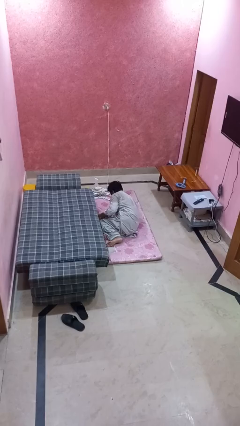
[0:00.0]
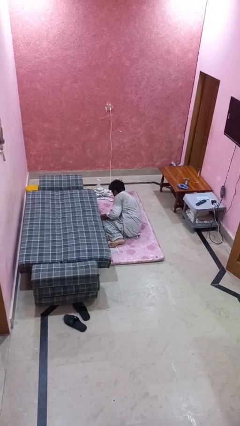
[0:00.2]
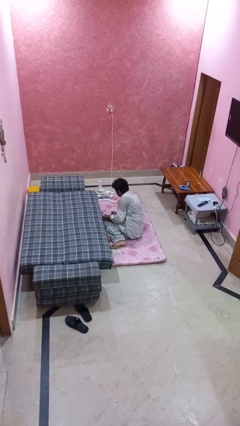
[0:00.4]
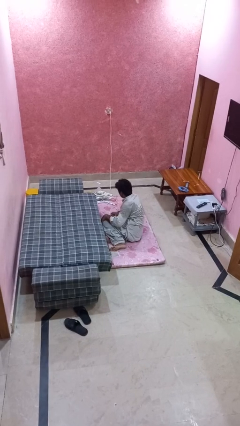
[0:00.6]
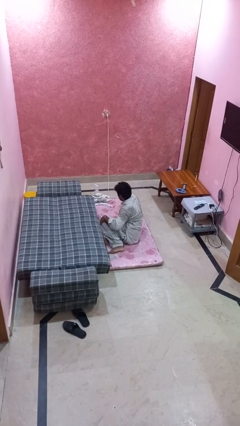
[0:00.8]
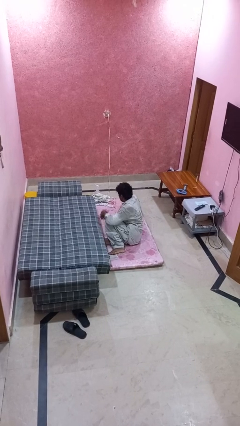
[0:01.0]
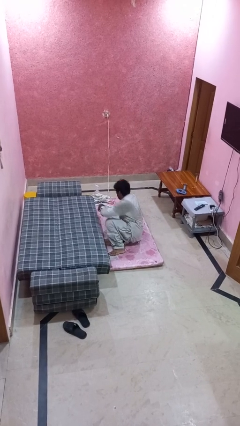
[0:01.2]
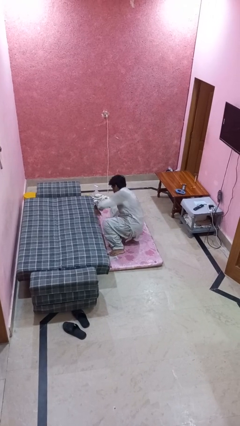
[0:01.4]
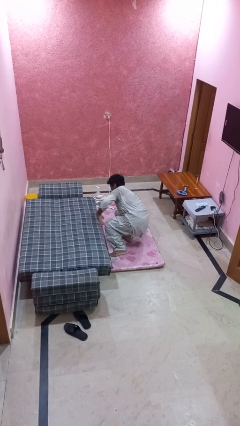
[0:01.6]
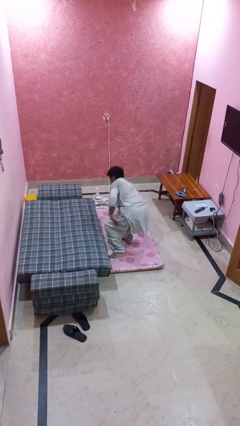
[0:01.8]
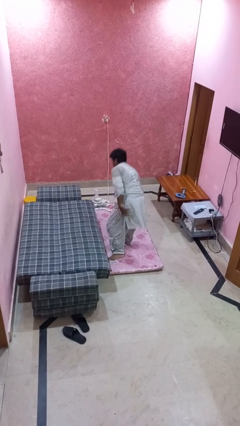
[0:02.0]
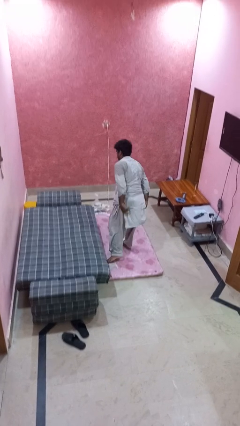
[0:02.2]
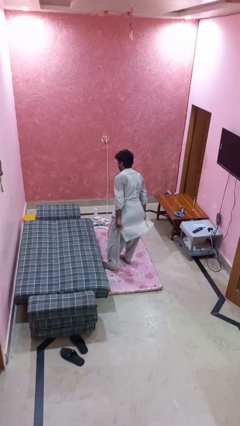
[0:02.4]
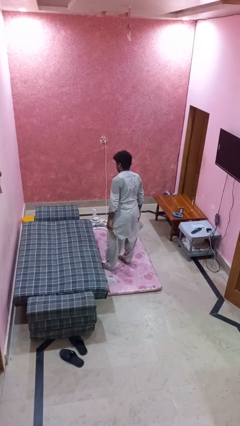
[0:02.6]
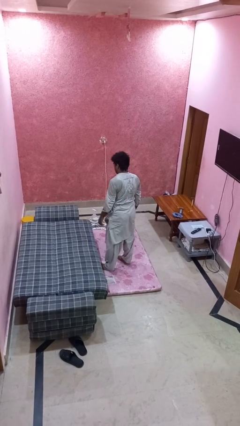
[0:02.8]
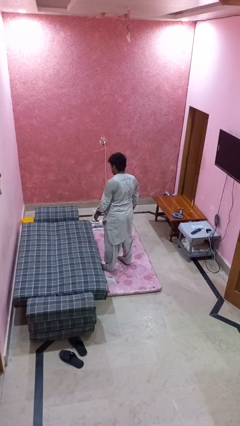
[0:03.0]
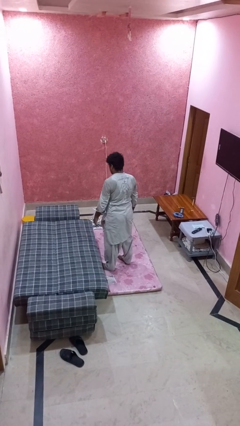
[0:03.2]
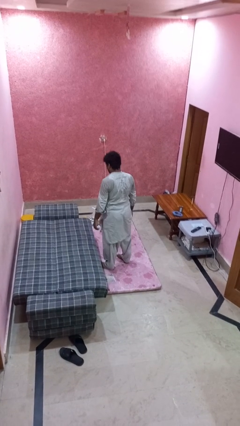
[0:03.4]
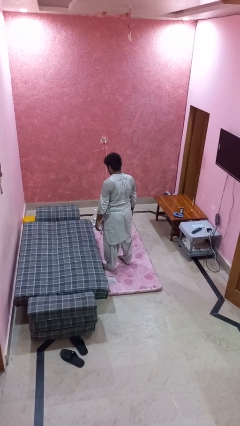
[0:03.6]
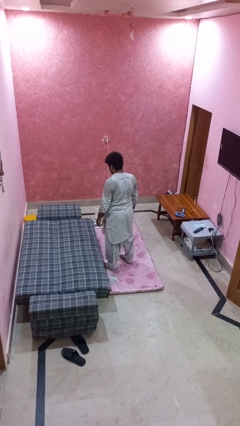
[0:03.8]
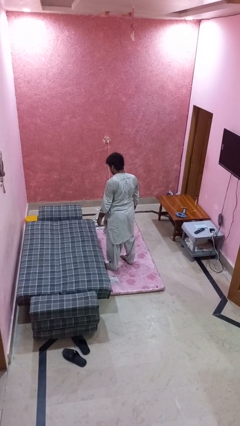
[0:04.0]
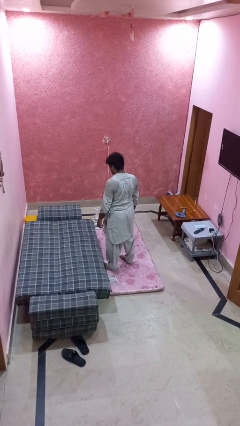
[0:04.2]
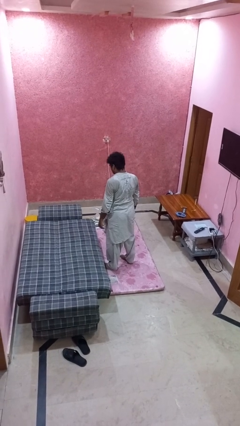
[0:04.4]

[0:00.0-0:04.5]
person stands up from floor

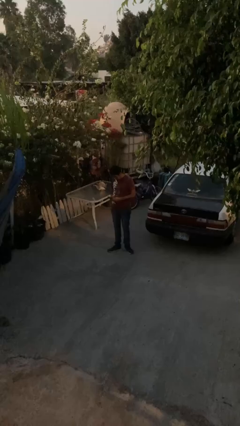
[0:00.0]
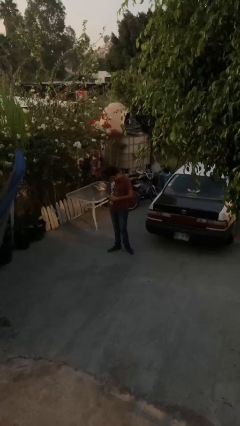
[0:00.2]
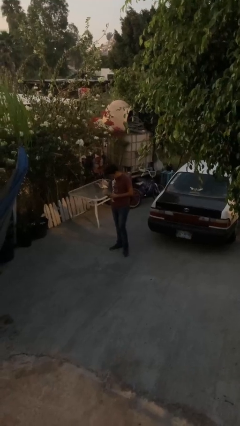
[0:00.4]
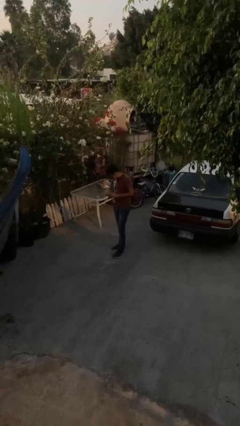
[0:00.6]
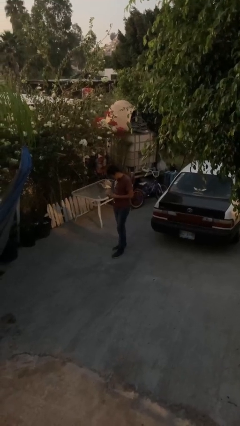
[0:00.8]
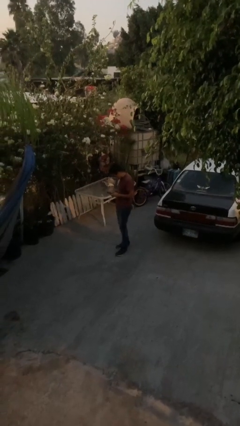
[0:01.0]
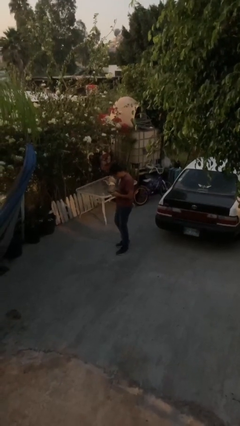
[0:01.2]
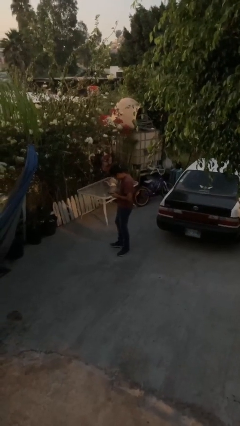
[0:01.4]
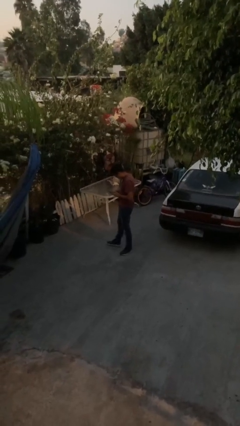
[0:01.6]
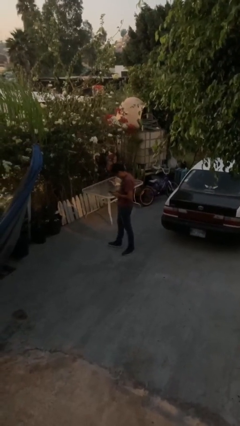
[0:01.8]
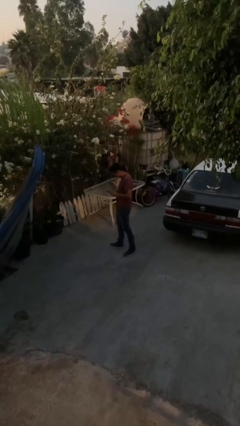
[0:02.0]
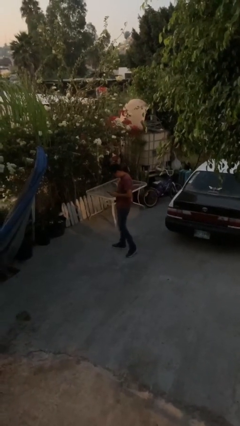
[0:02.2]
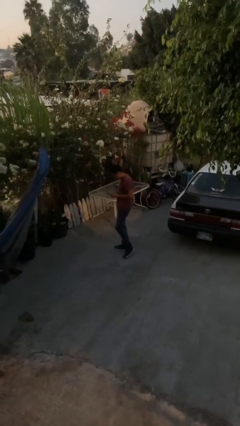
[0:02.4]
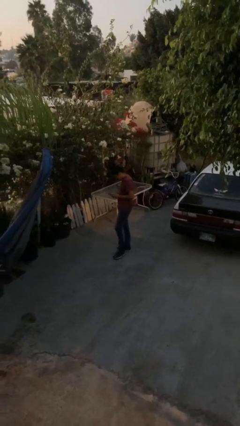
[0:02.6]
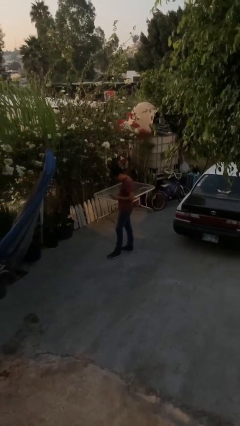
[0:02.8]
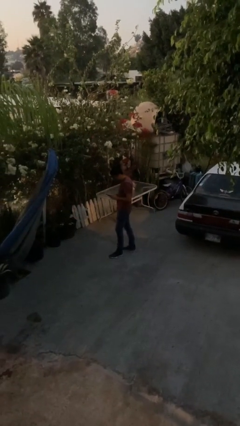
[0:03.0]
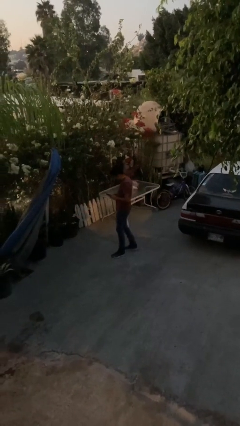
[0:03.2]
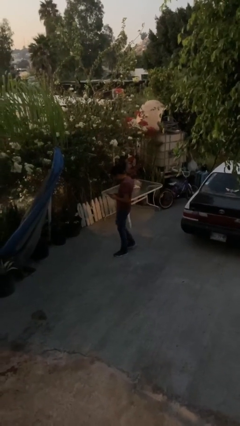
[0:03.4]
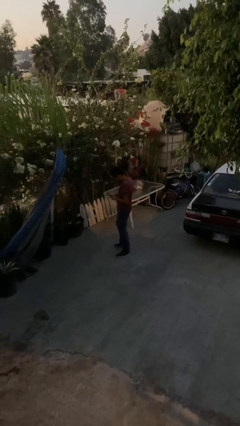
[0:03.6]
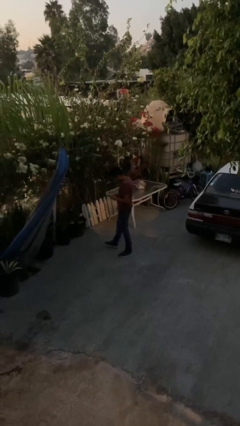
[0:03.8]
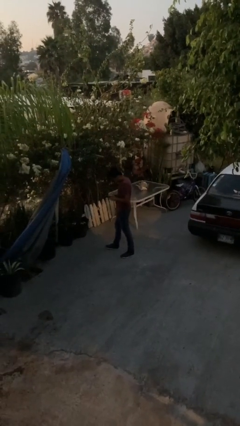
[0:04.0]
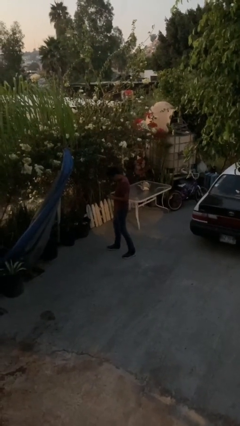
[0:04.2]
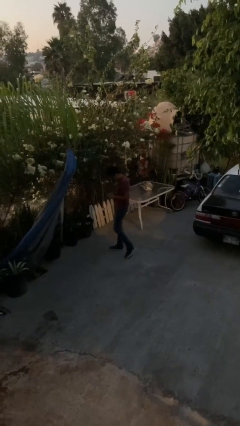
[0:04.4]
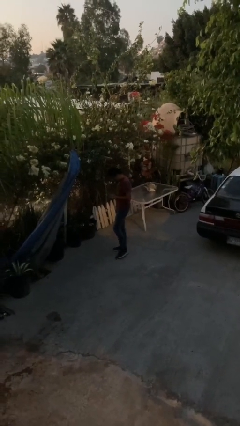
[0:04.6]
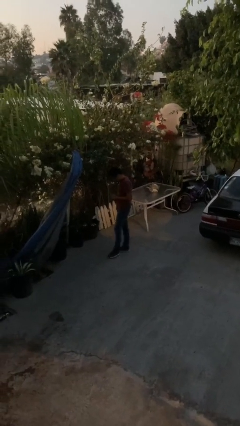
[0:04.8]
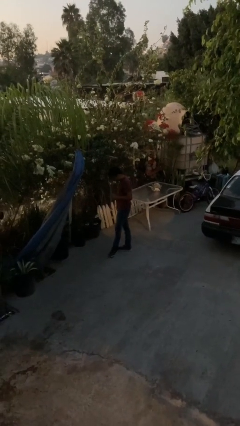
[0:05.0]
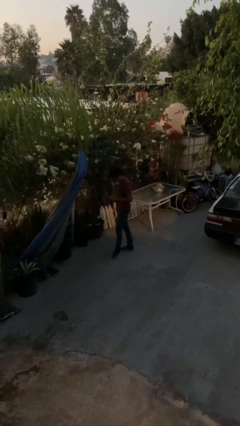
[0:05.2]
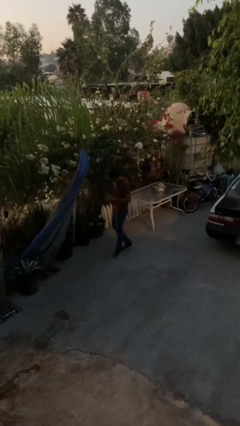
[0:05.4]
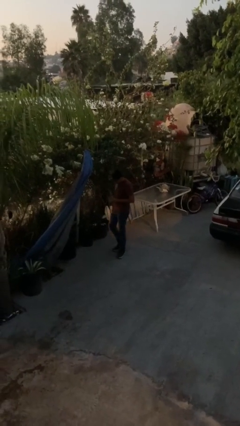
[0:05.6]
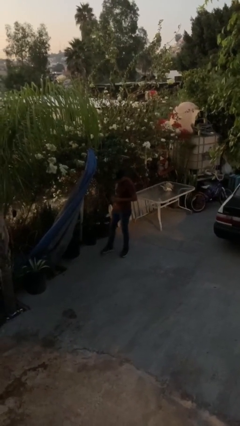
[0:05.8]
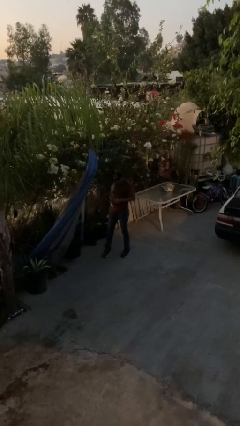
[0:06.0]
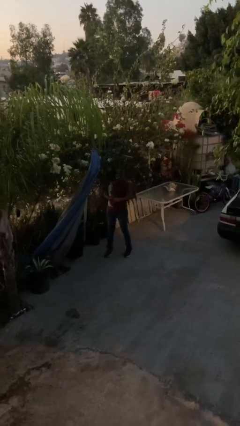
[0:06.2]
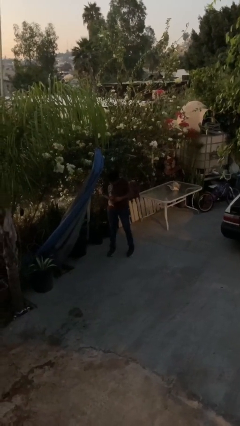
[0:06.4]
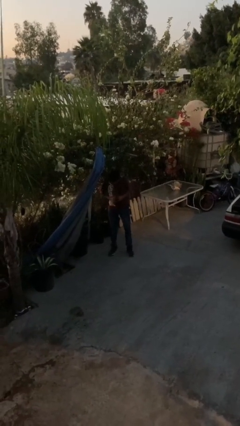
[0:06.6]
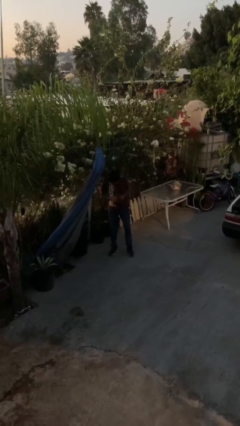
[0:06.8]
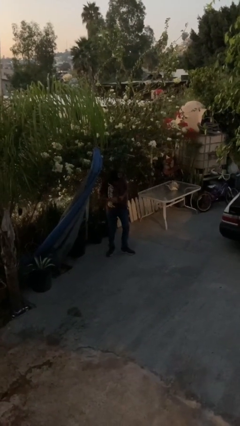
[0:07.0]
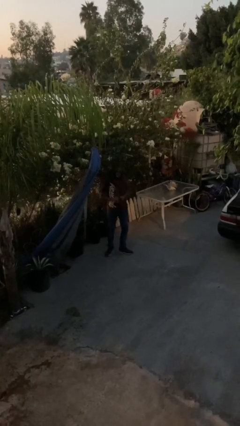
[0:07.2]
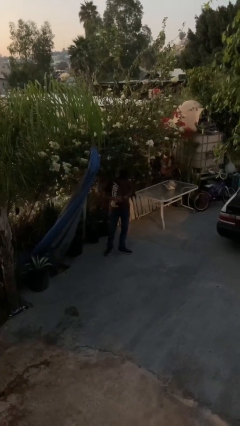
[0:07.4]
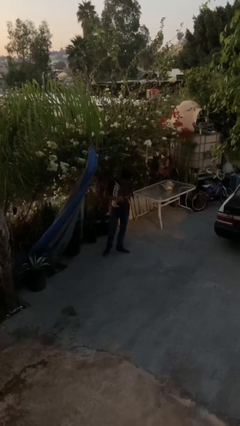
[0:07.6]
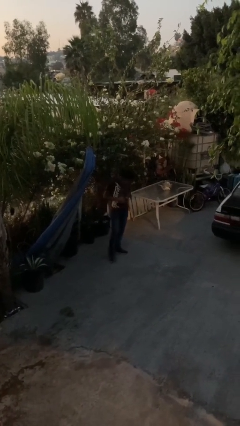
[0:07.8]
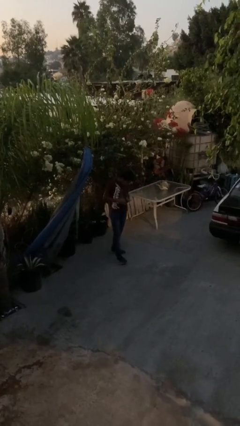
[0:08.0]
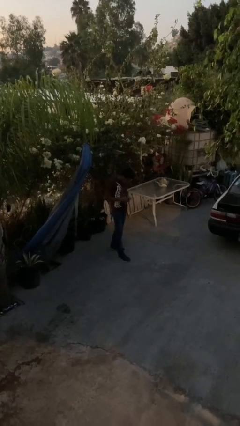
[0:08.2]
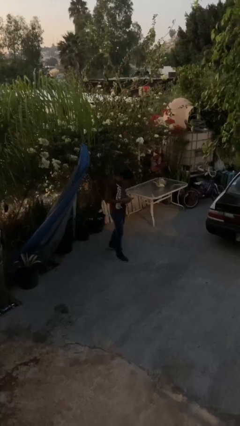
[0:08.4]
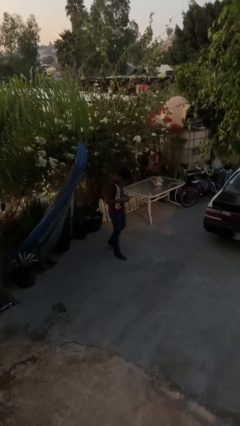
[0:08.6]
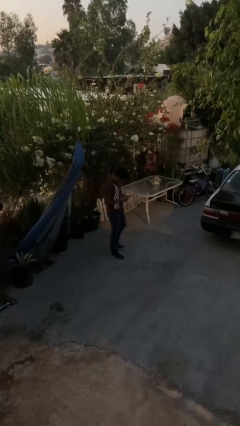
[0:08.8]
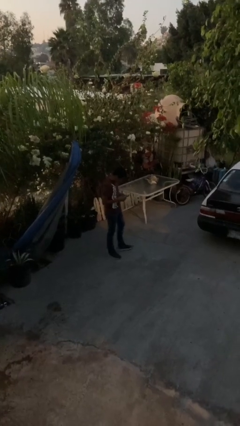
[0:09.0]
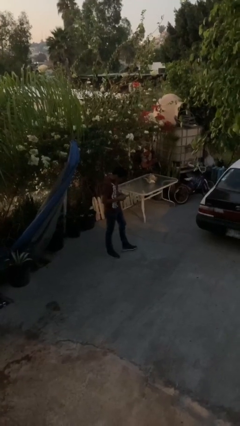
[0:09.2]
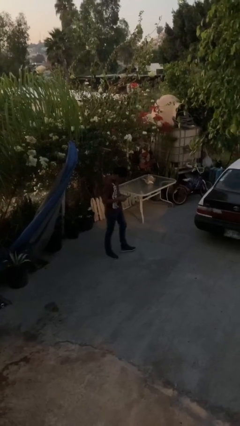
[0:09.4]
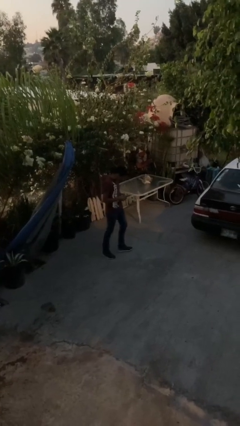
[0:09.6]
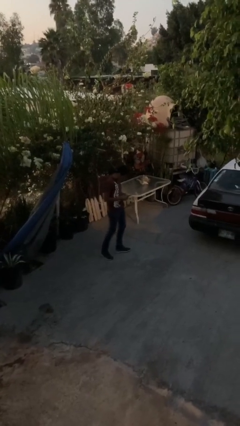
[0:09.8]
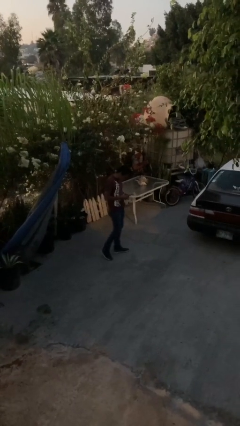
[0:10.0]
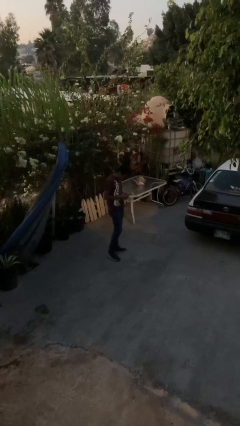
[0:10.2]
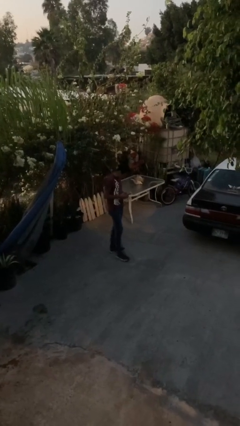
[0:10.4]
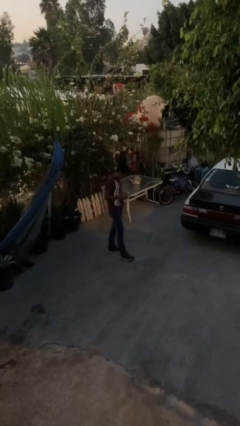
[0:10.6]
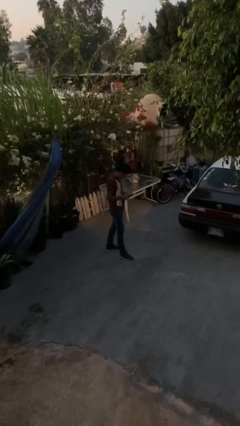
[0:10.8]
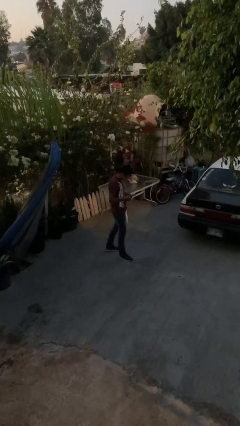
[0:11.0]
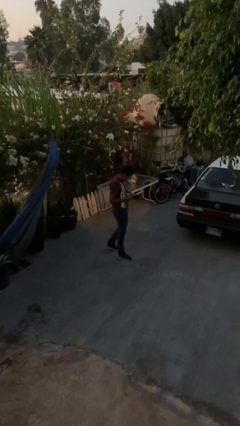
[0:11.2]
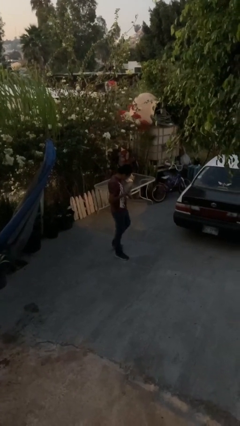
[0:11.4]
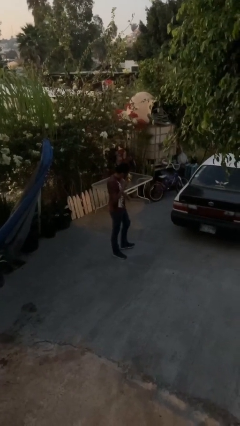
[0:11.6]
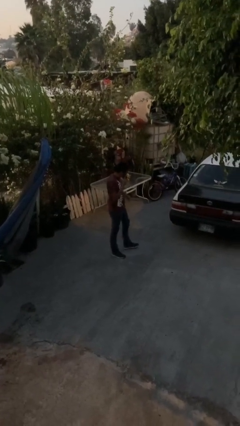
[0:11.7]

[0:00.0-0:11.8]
person texts on phone

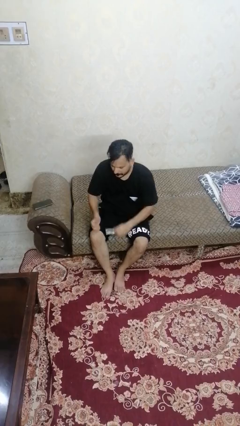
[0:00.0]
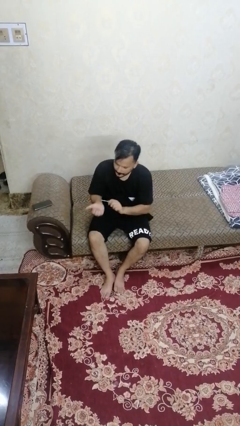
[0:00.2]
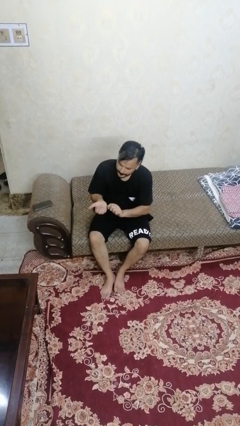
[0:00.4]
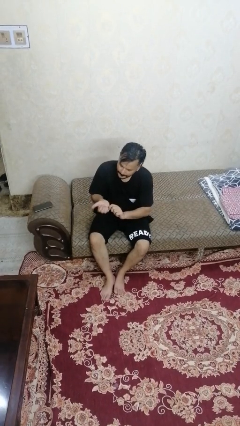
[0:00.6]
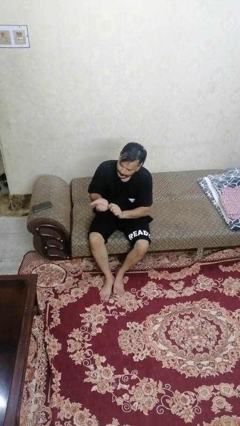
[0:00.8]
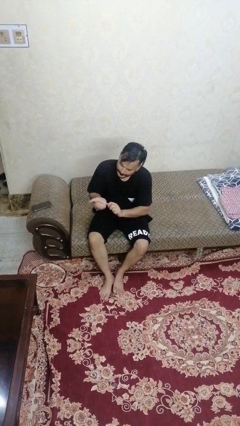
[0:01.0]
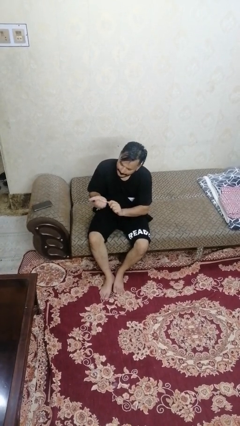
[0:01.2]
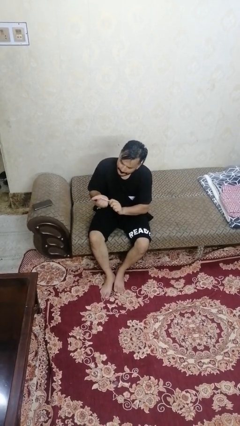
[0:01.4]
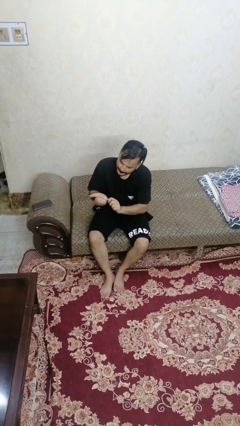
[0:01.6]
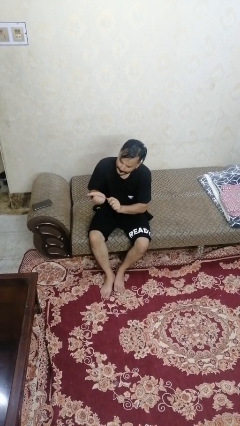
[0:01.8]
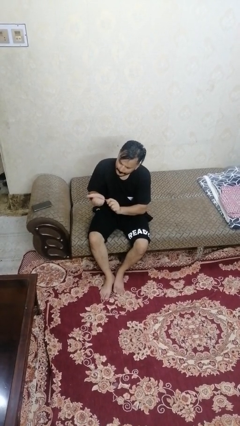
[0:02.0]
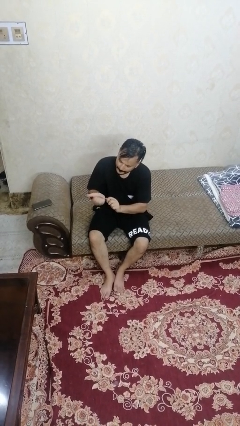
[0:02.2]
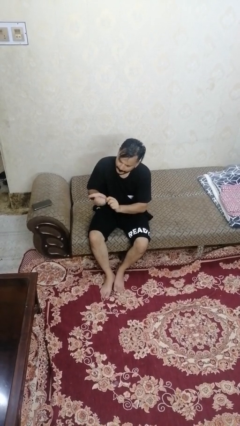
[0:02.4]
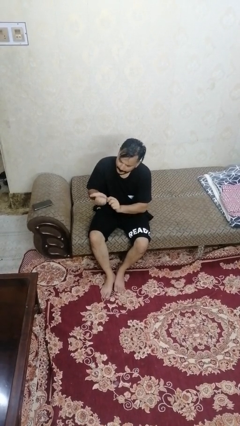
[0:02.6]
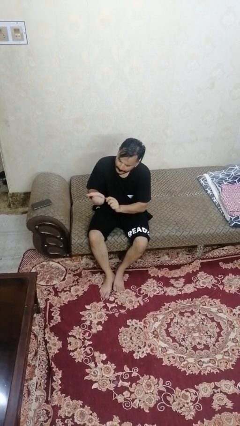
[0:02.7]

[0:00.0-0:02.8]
person files fingernails
